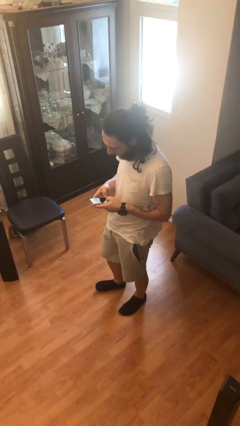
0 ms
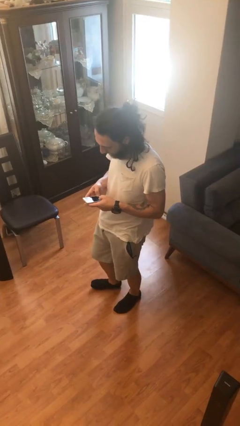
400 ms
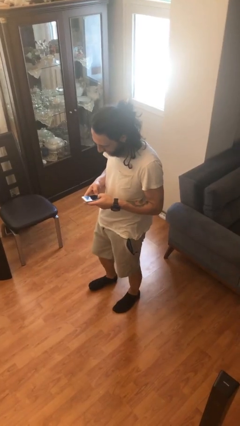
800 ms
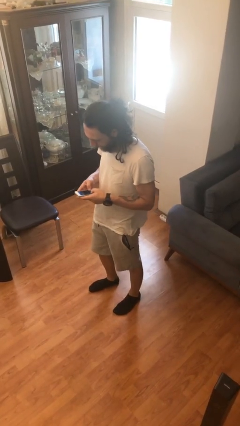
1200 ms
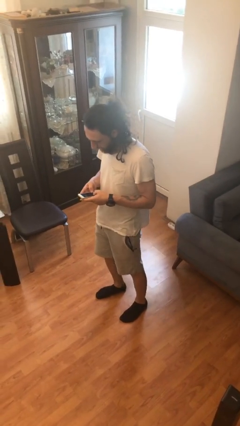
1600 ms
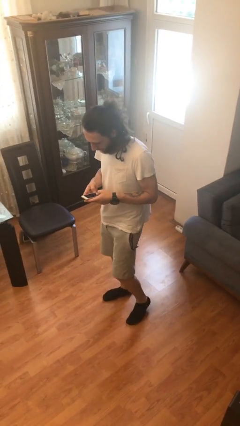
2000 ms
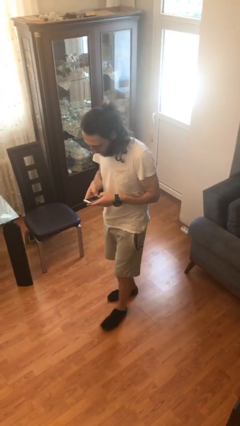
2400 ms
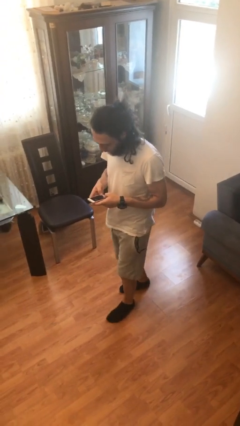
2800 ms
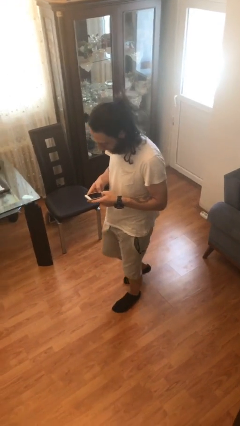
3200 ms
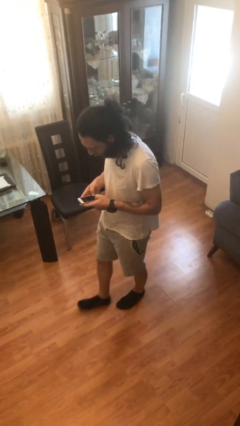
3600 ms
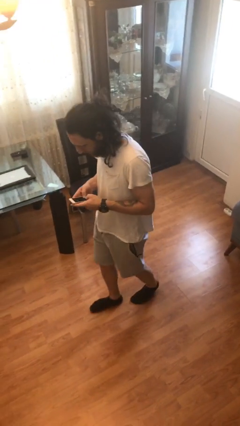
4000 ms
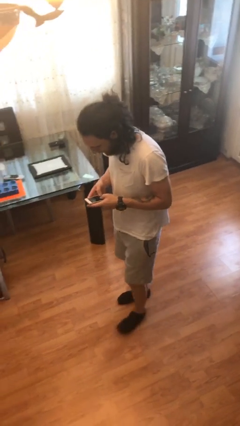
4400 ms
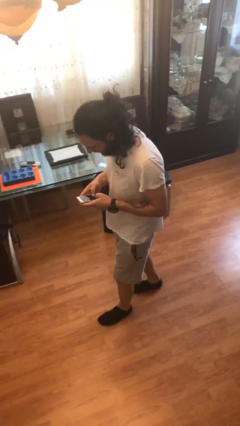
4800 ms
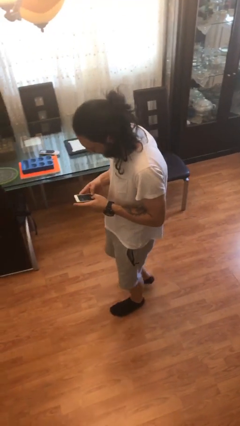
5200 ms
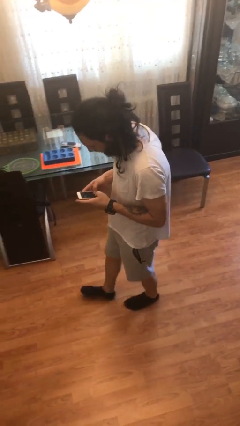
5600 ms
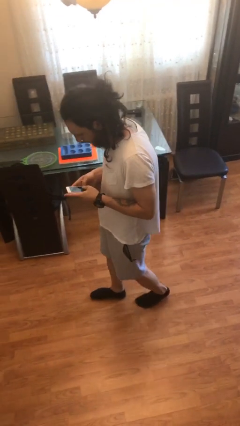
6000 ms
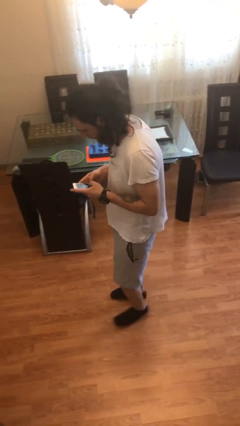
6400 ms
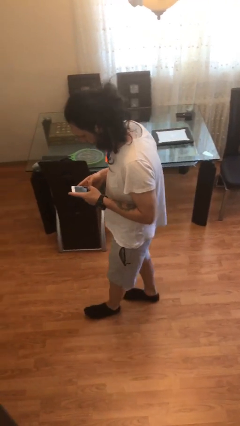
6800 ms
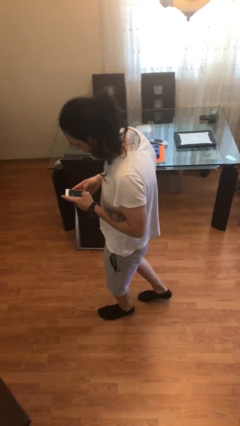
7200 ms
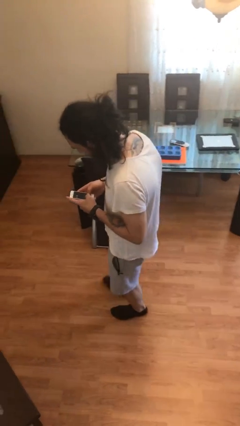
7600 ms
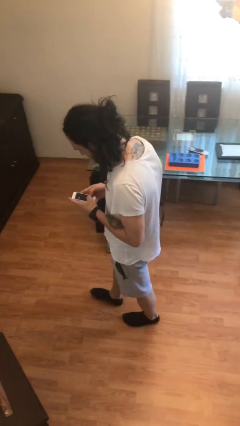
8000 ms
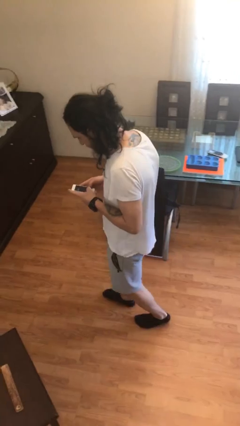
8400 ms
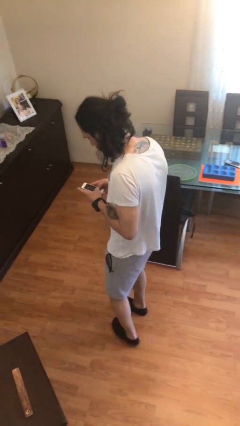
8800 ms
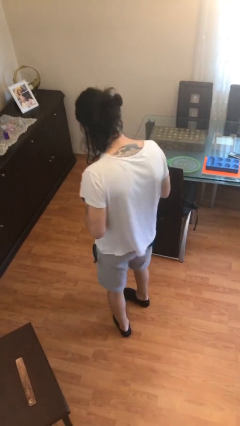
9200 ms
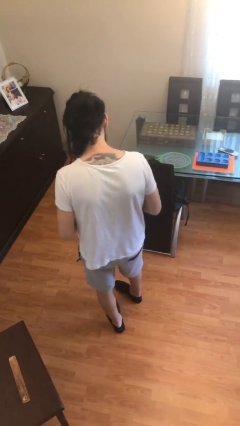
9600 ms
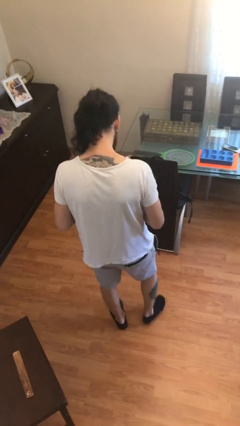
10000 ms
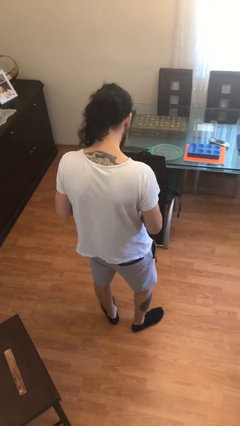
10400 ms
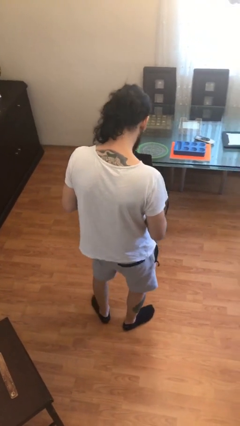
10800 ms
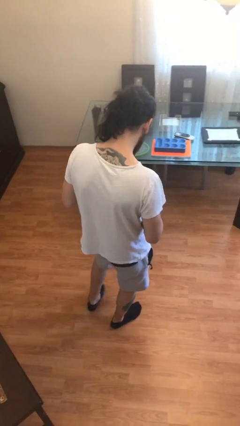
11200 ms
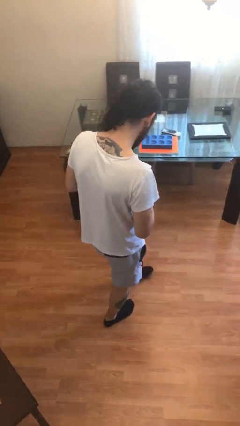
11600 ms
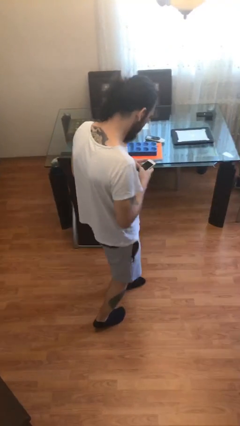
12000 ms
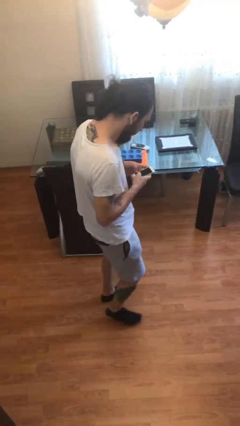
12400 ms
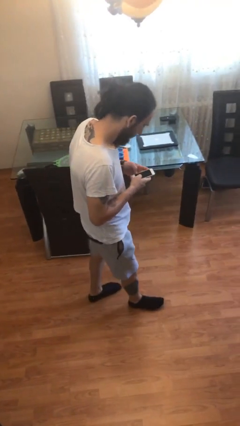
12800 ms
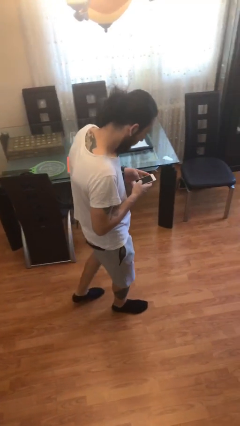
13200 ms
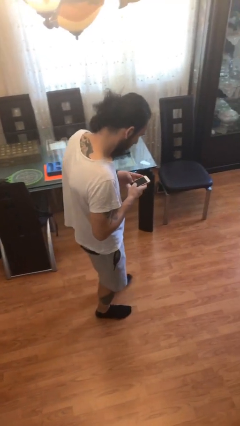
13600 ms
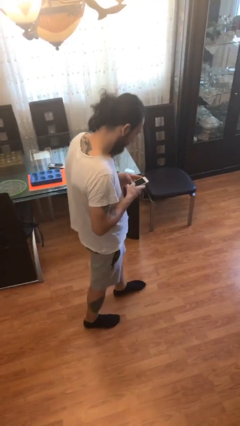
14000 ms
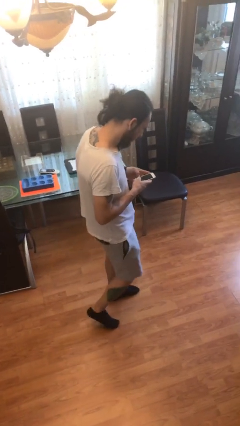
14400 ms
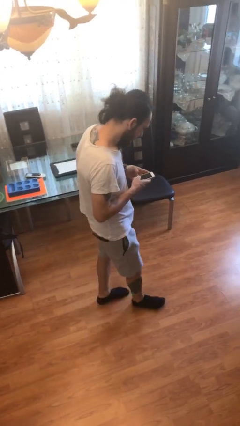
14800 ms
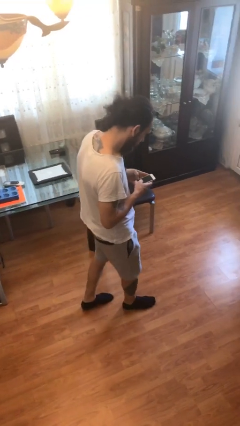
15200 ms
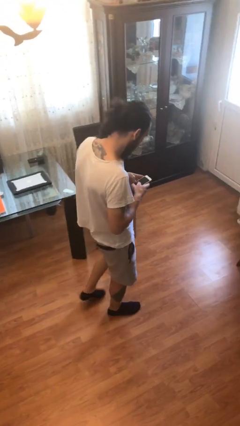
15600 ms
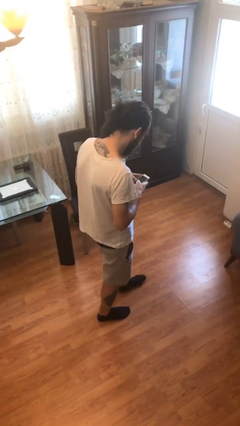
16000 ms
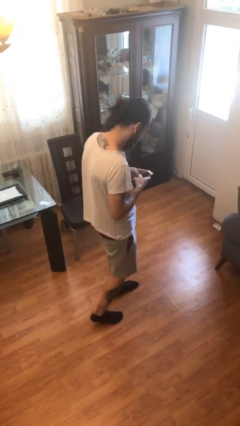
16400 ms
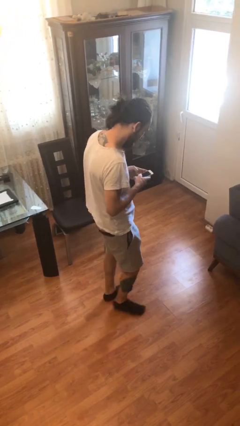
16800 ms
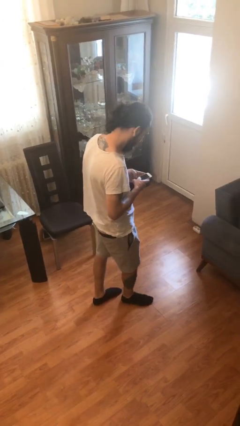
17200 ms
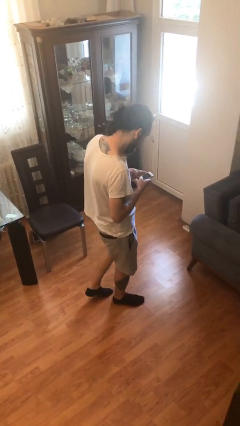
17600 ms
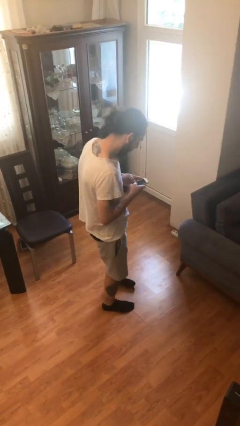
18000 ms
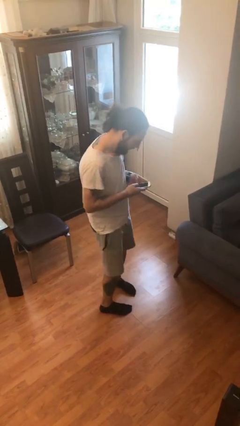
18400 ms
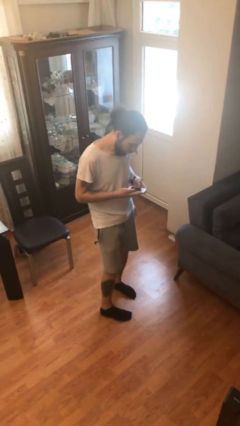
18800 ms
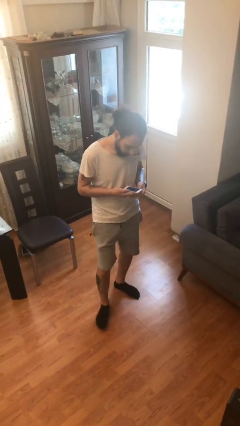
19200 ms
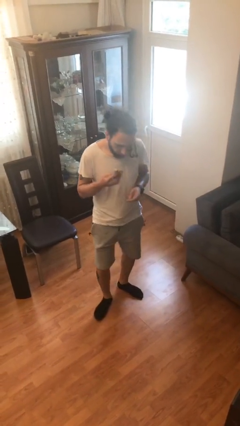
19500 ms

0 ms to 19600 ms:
person texts on phone

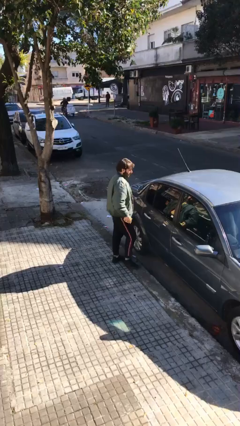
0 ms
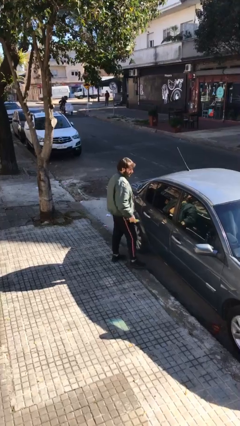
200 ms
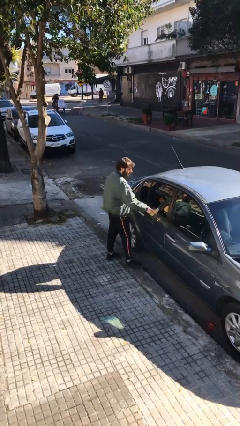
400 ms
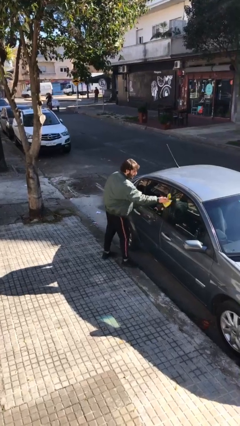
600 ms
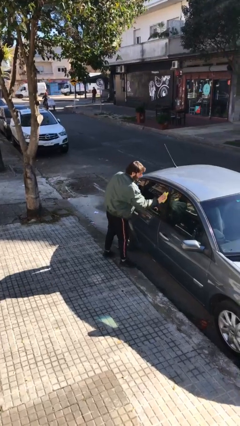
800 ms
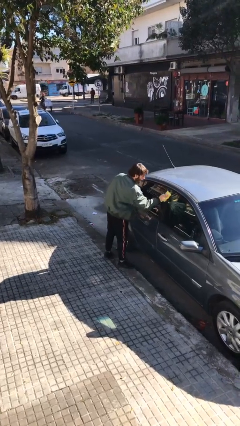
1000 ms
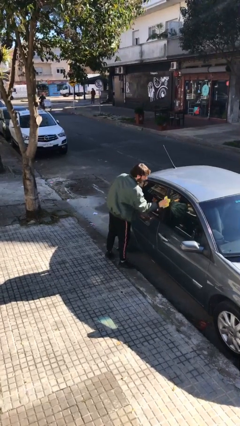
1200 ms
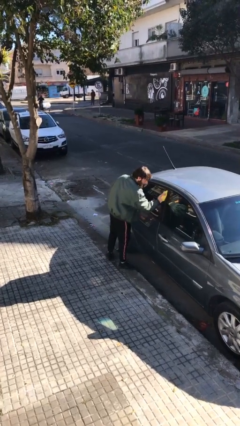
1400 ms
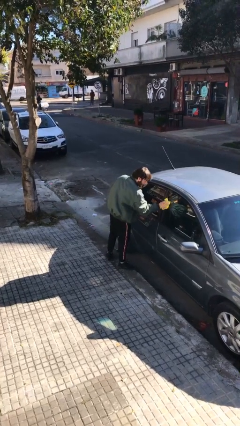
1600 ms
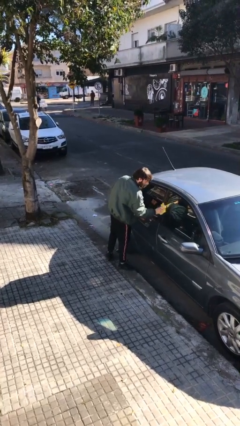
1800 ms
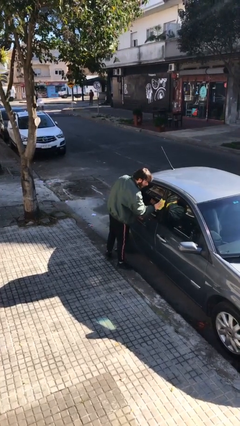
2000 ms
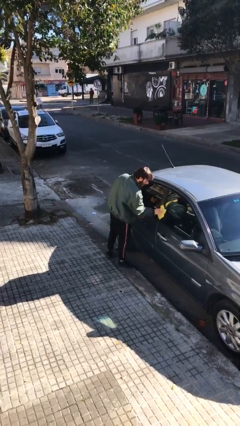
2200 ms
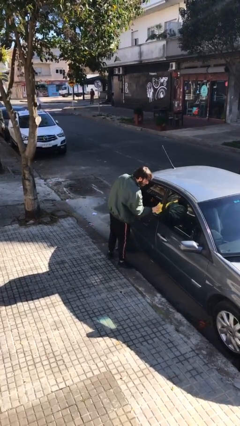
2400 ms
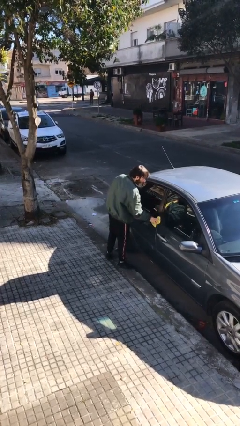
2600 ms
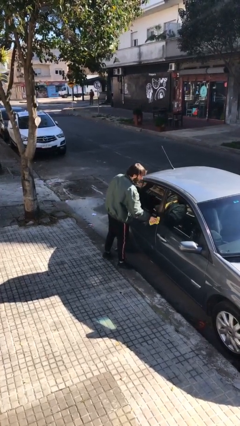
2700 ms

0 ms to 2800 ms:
person polishes car with rag

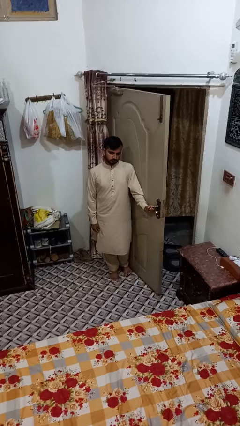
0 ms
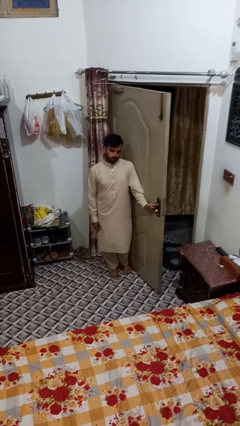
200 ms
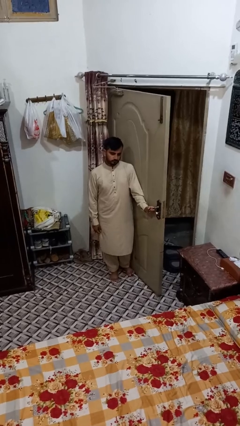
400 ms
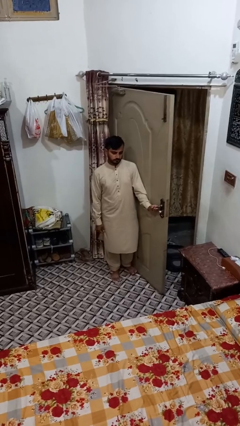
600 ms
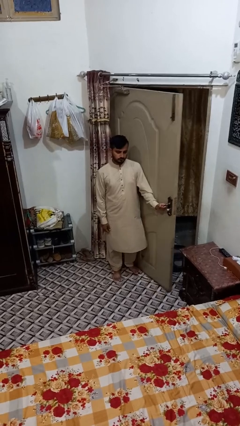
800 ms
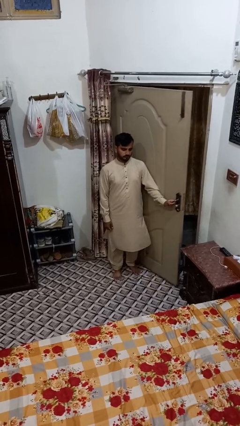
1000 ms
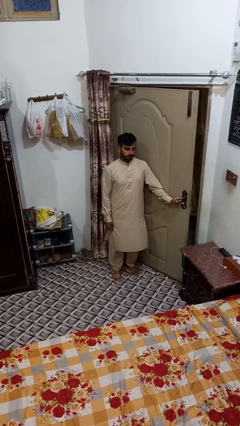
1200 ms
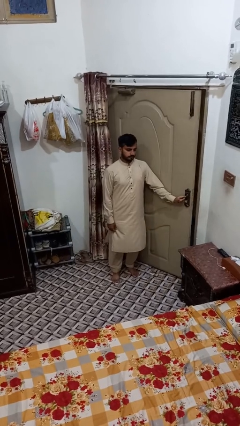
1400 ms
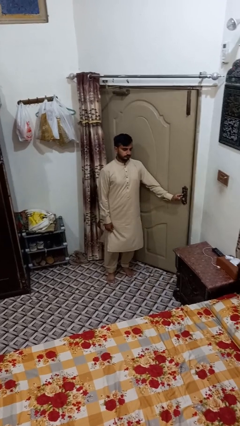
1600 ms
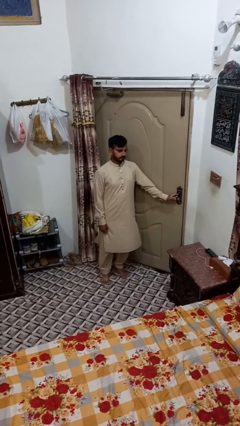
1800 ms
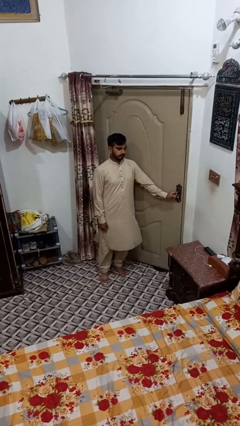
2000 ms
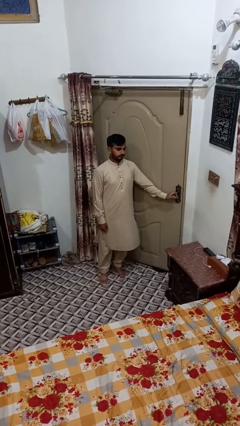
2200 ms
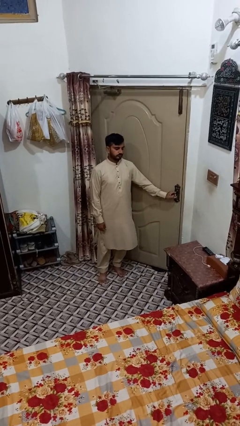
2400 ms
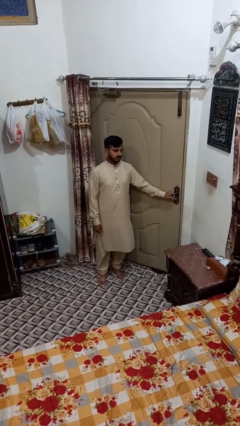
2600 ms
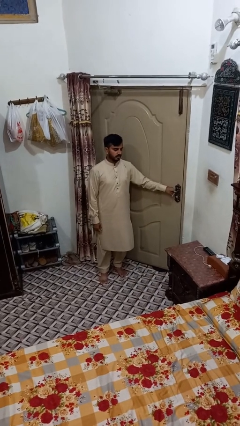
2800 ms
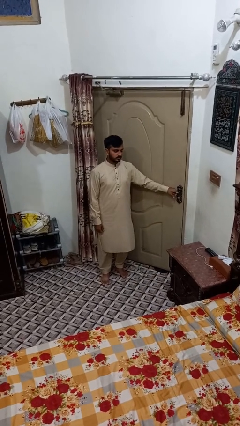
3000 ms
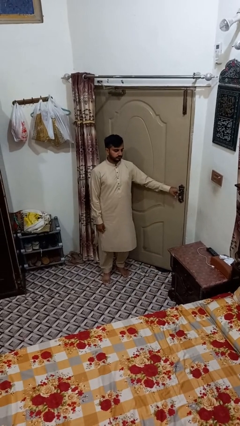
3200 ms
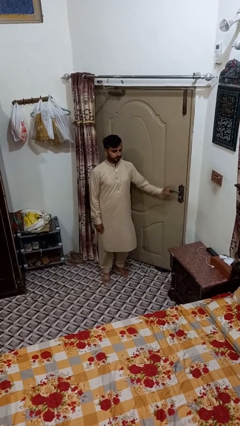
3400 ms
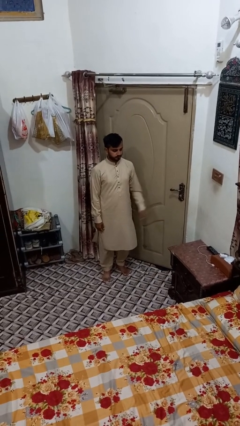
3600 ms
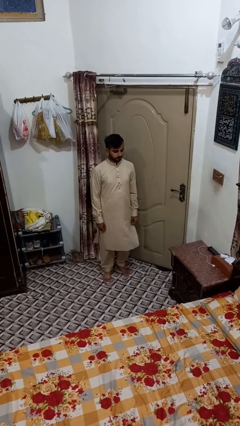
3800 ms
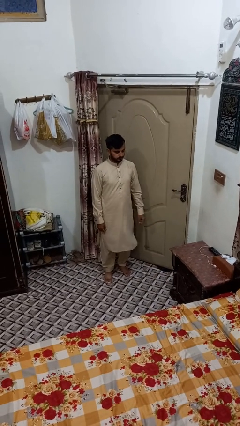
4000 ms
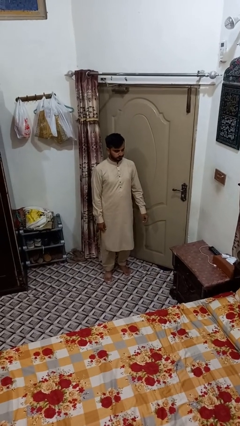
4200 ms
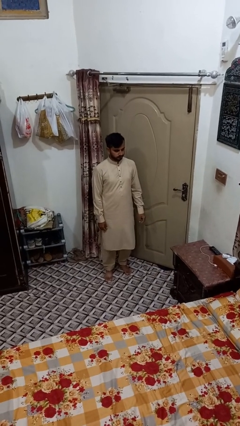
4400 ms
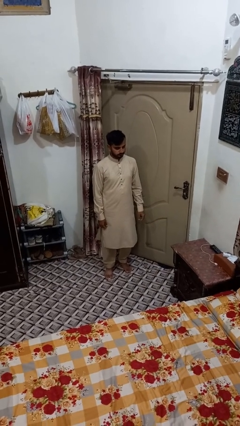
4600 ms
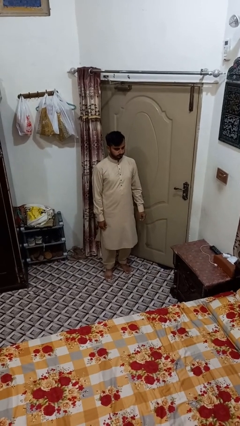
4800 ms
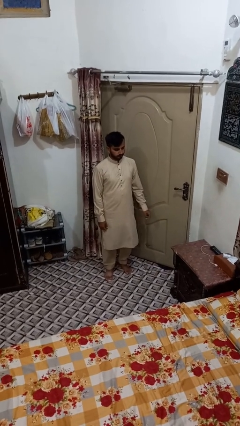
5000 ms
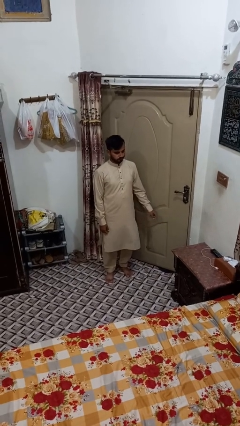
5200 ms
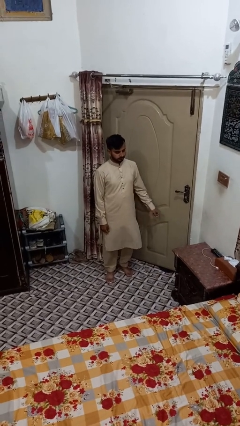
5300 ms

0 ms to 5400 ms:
person closes closet door
